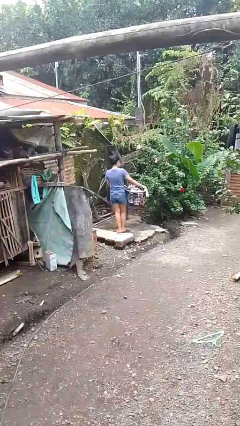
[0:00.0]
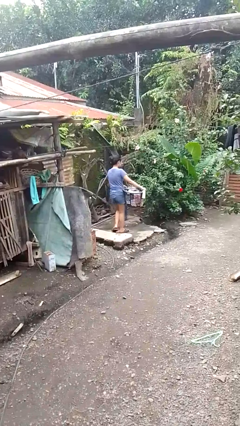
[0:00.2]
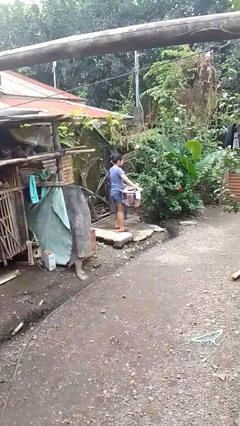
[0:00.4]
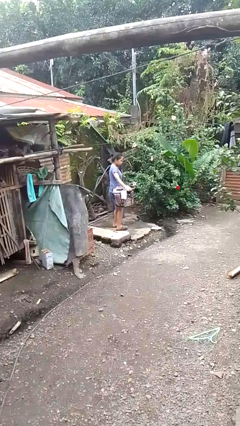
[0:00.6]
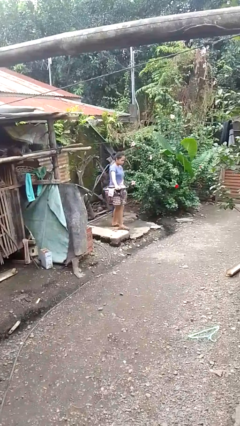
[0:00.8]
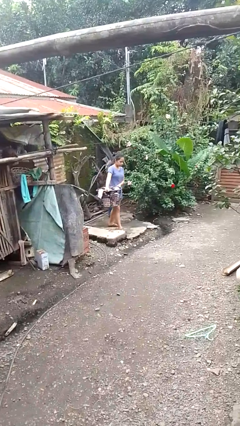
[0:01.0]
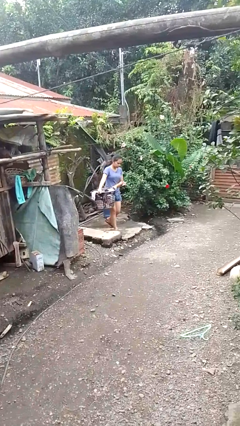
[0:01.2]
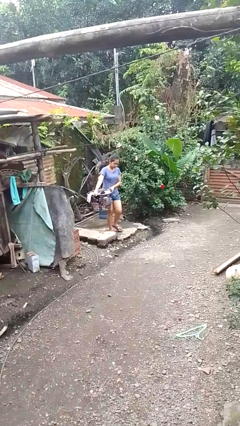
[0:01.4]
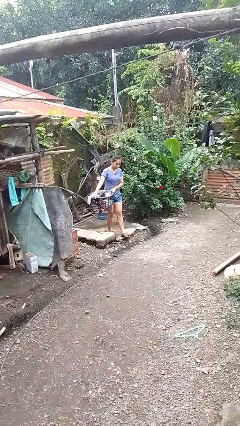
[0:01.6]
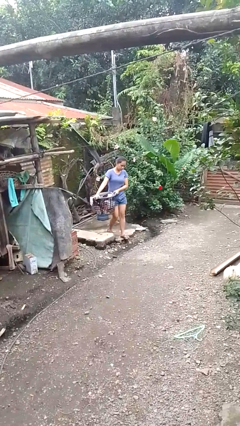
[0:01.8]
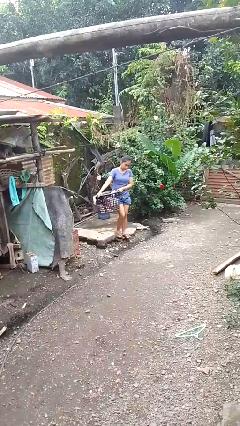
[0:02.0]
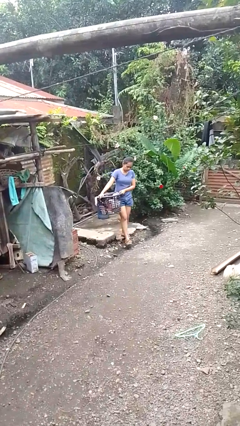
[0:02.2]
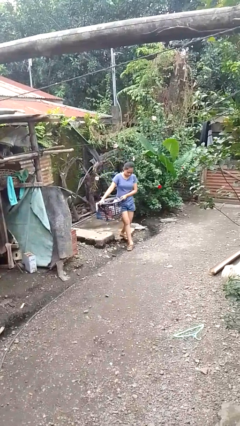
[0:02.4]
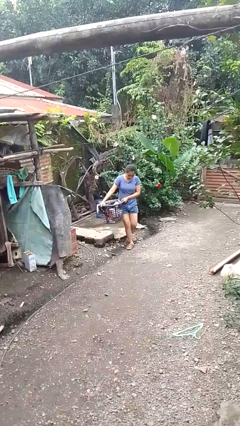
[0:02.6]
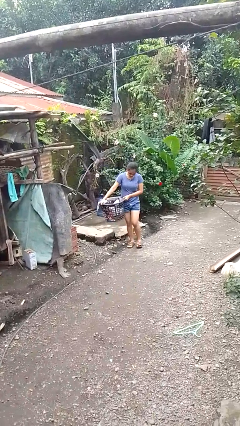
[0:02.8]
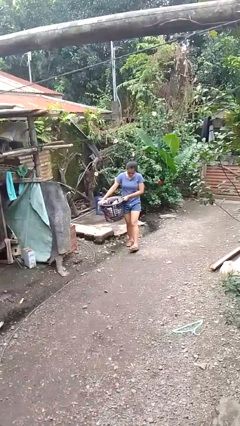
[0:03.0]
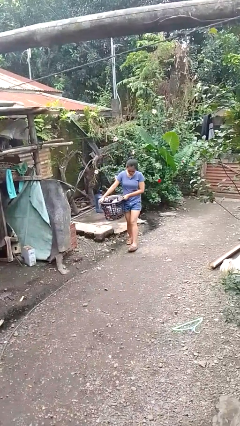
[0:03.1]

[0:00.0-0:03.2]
person carries laundry basket

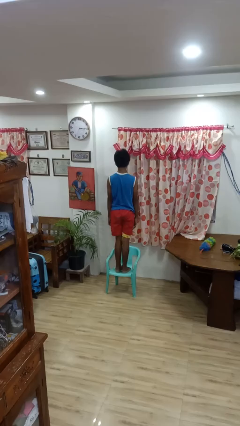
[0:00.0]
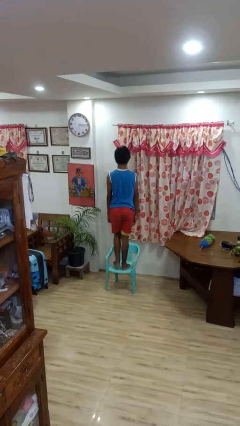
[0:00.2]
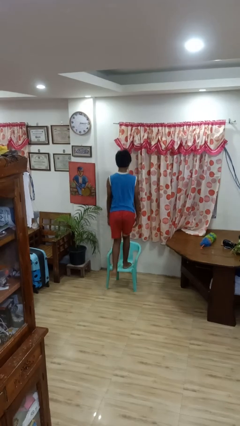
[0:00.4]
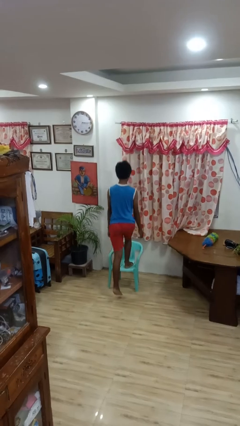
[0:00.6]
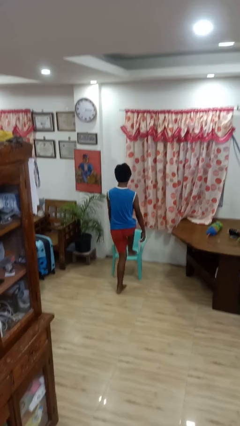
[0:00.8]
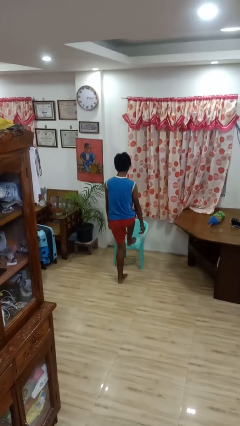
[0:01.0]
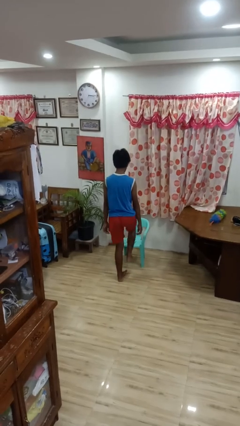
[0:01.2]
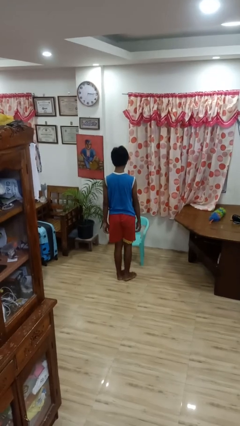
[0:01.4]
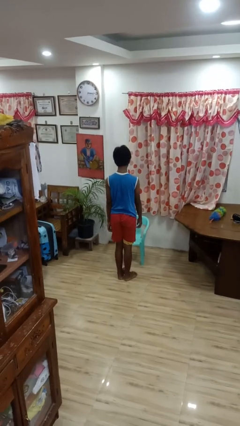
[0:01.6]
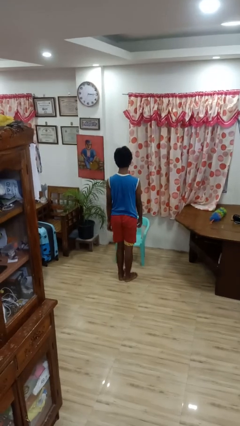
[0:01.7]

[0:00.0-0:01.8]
person climbs off chair

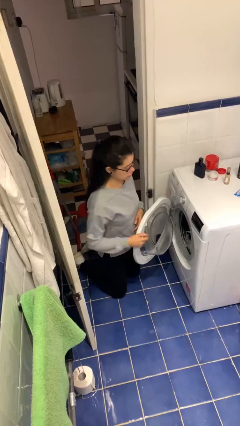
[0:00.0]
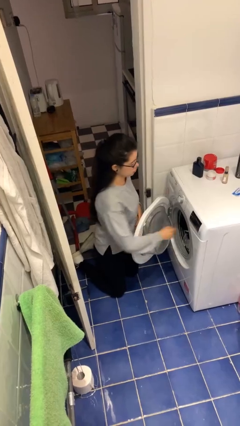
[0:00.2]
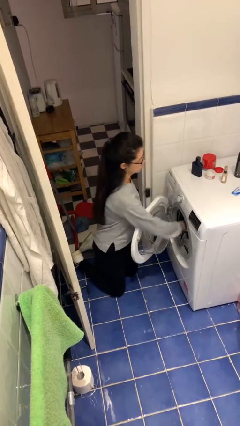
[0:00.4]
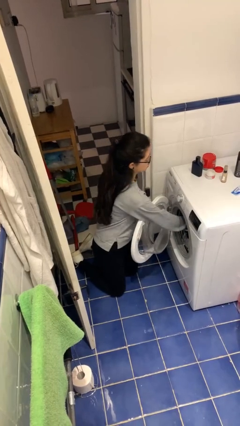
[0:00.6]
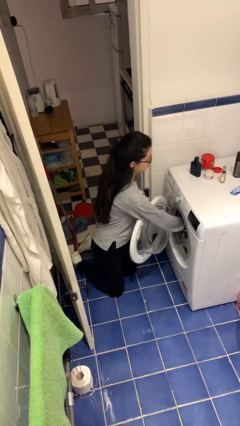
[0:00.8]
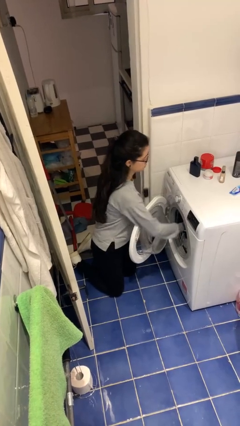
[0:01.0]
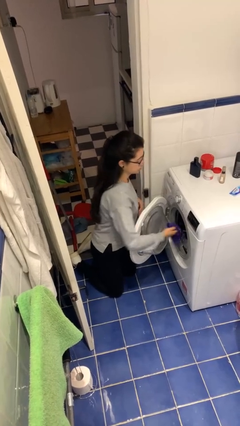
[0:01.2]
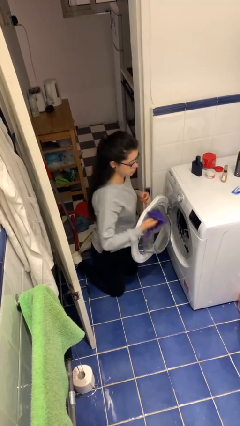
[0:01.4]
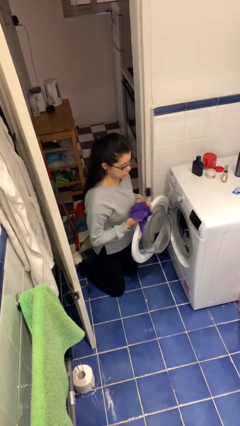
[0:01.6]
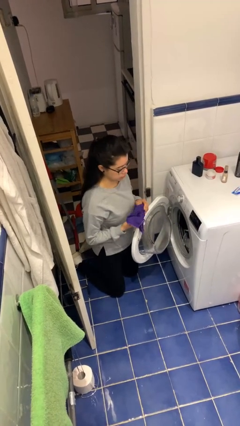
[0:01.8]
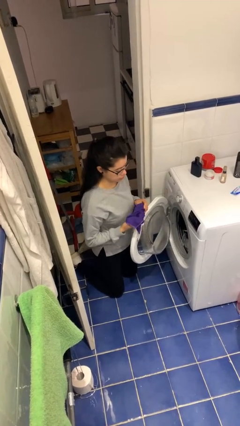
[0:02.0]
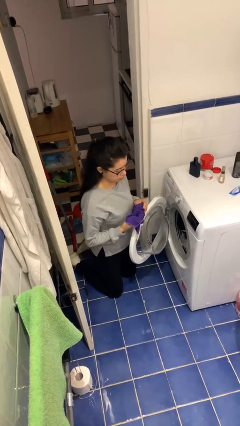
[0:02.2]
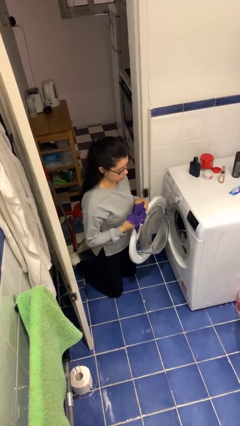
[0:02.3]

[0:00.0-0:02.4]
person unloads clotheswasher

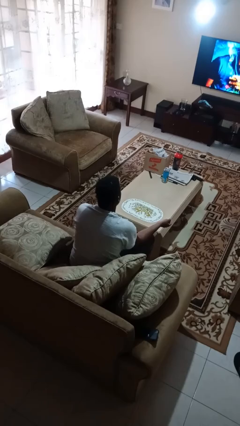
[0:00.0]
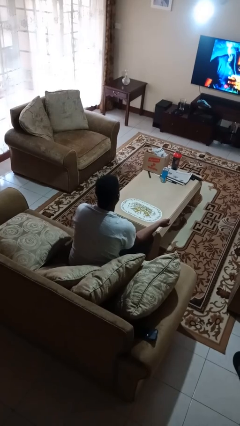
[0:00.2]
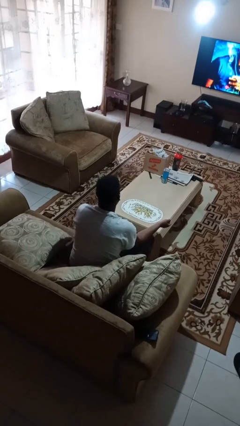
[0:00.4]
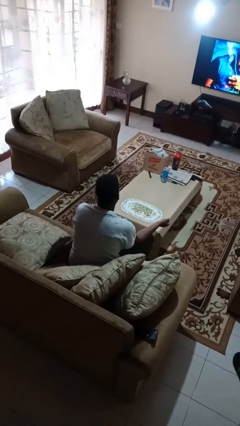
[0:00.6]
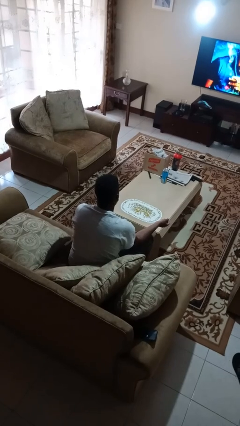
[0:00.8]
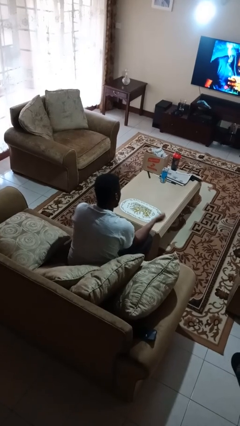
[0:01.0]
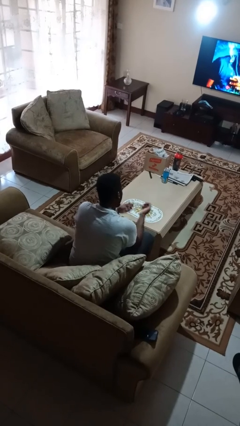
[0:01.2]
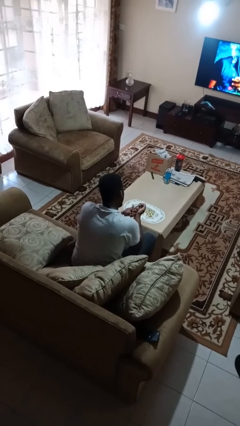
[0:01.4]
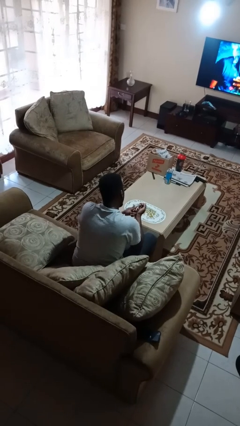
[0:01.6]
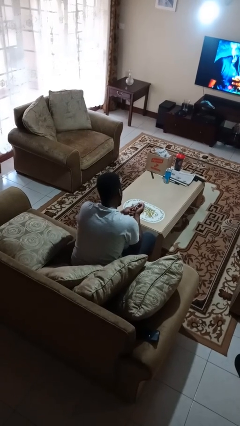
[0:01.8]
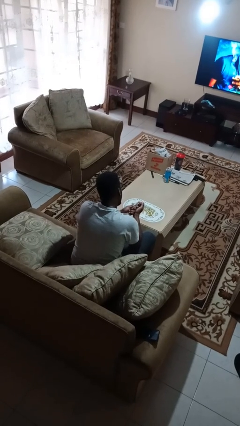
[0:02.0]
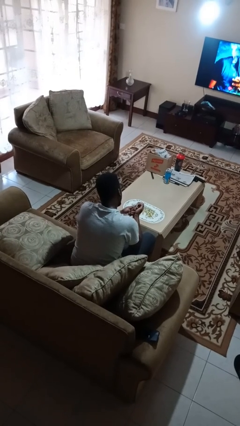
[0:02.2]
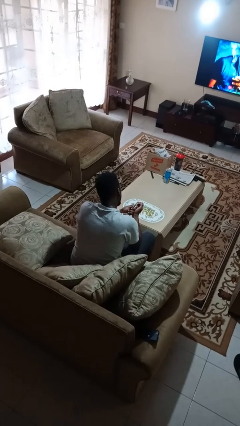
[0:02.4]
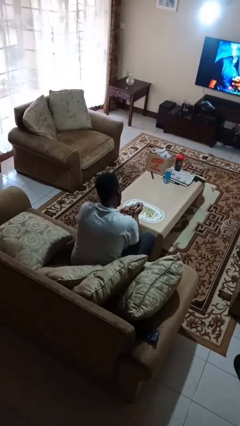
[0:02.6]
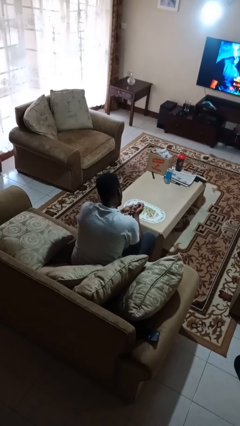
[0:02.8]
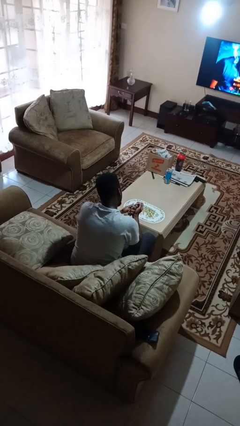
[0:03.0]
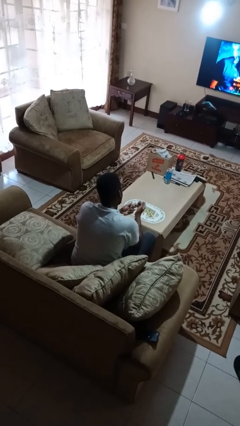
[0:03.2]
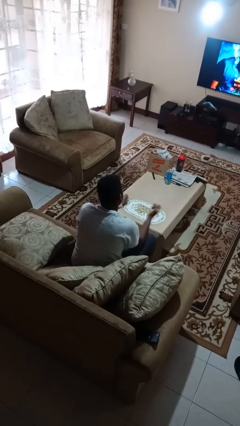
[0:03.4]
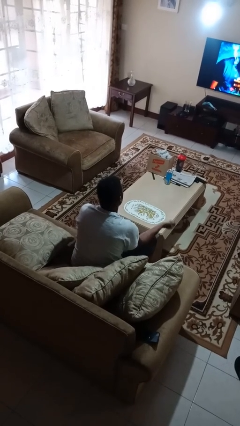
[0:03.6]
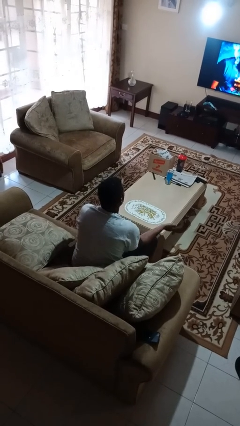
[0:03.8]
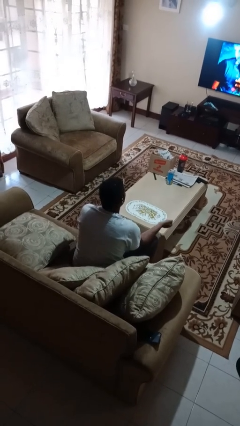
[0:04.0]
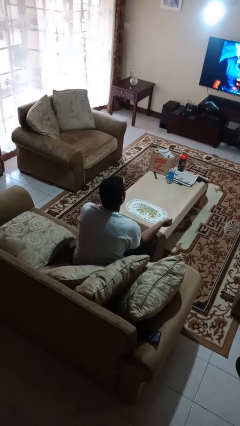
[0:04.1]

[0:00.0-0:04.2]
person clips fingernails

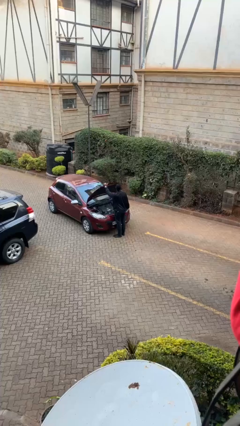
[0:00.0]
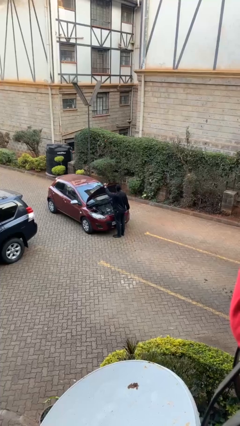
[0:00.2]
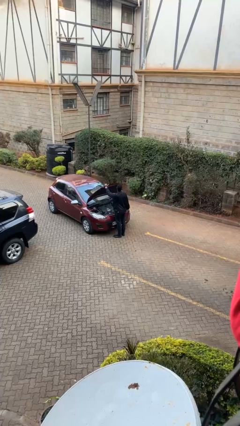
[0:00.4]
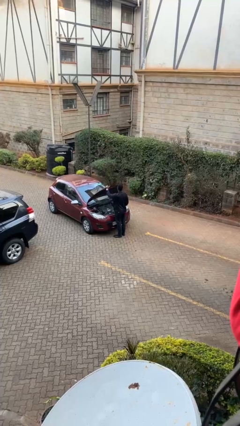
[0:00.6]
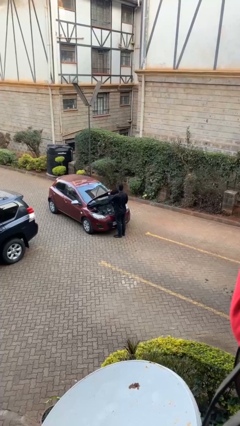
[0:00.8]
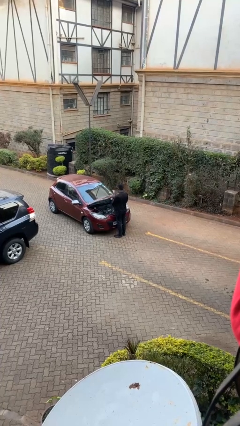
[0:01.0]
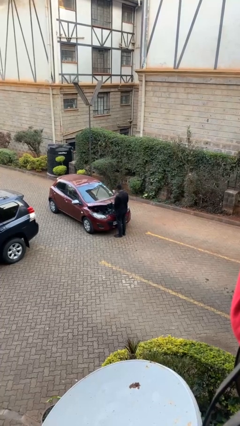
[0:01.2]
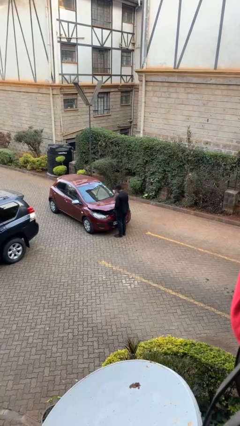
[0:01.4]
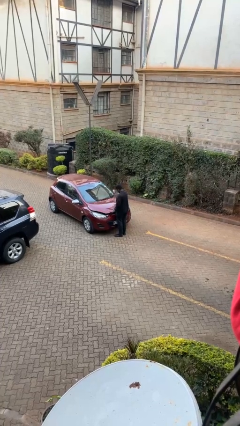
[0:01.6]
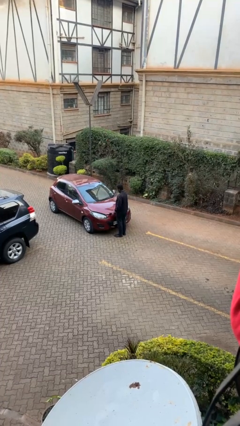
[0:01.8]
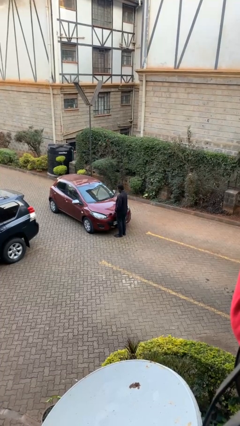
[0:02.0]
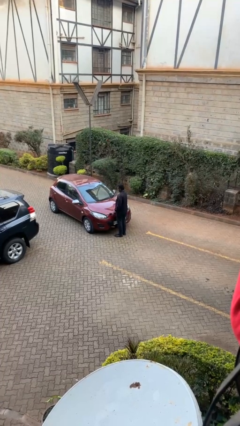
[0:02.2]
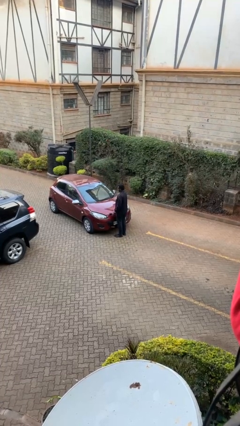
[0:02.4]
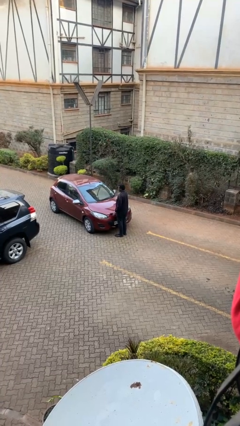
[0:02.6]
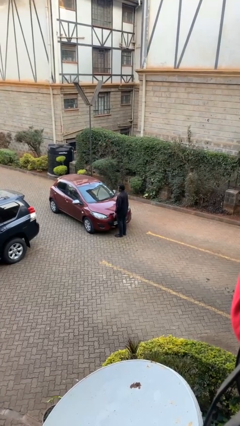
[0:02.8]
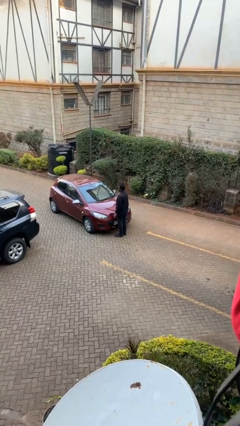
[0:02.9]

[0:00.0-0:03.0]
person closes car hood

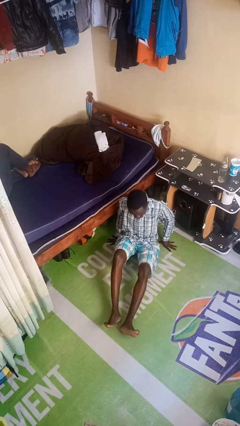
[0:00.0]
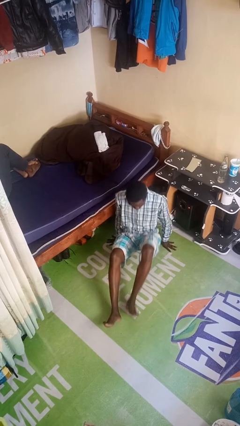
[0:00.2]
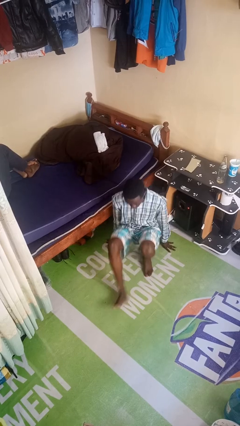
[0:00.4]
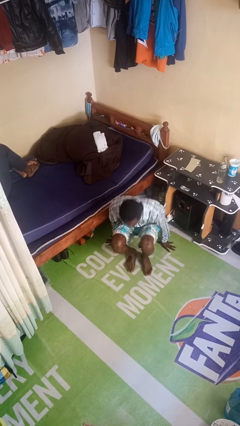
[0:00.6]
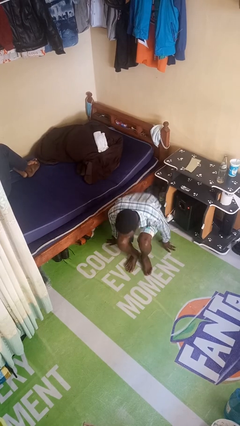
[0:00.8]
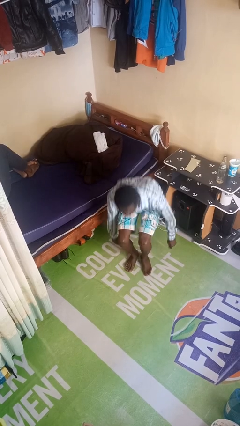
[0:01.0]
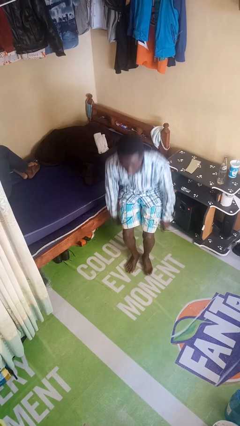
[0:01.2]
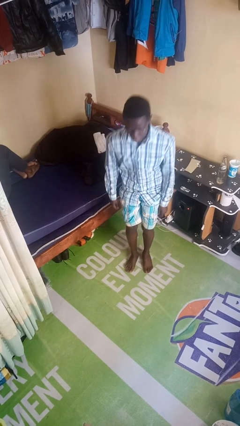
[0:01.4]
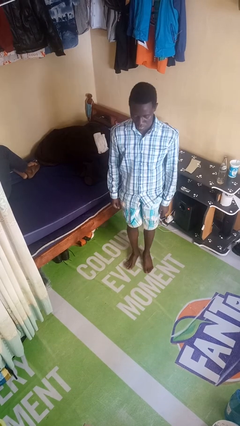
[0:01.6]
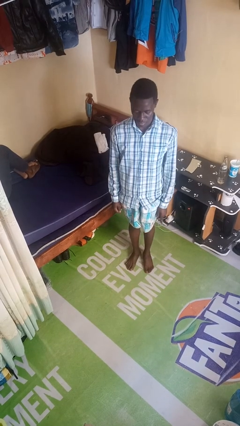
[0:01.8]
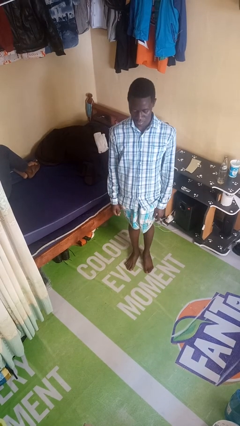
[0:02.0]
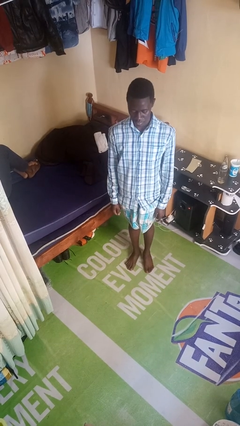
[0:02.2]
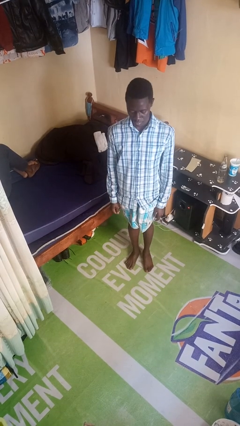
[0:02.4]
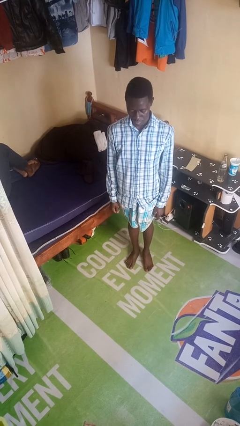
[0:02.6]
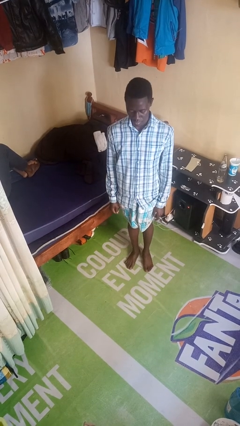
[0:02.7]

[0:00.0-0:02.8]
person stands up from floor
